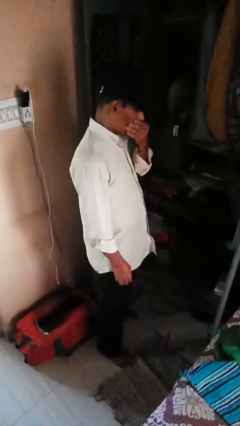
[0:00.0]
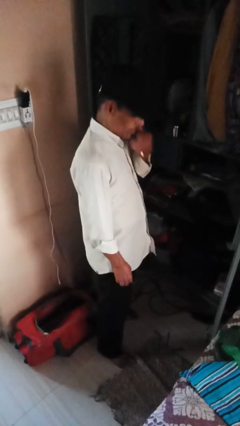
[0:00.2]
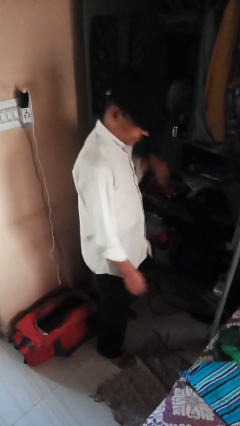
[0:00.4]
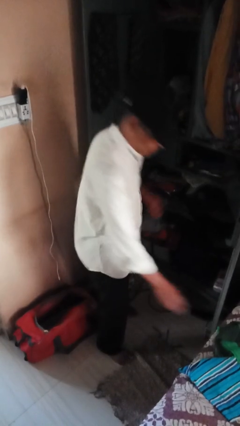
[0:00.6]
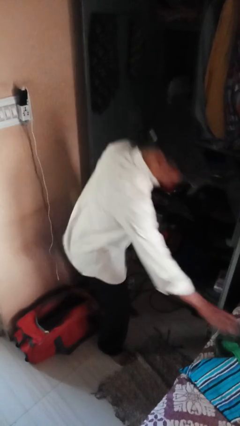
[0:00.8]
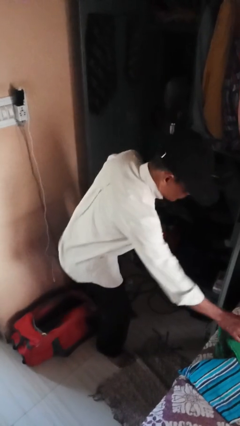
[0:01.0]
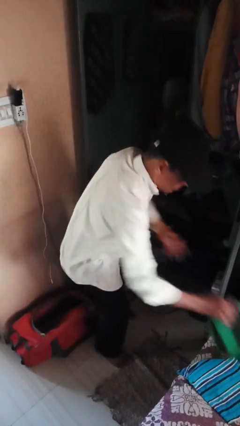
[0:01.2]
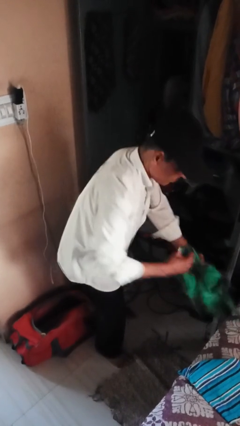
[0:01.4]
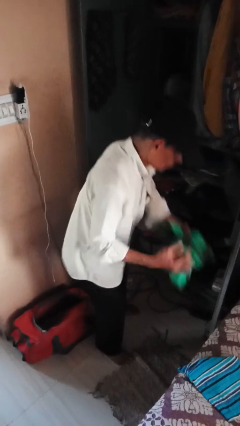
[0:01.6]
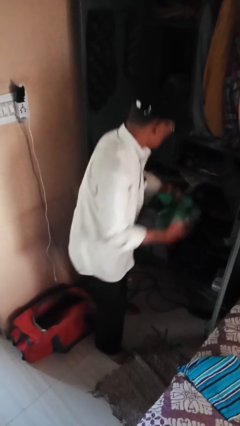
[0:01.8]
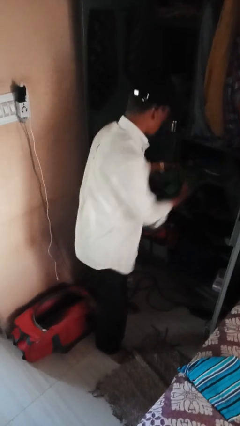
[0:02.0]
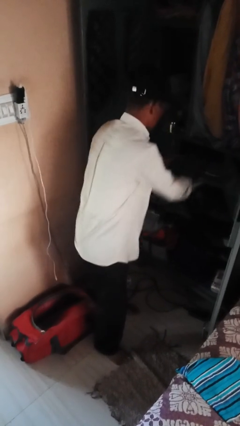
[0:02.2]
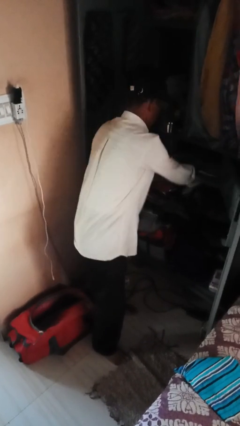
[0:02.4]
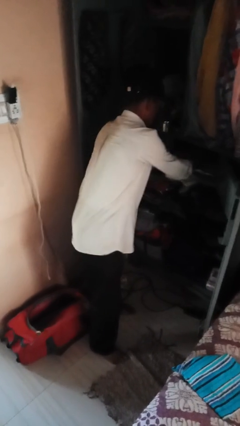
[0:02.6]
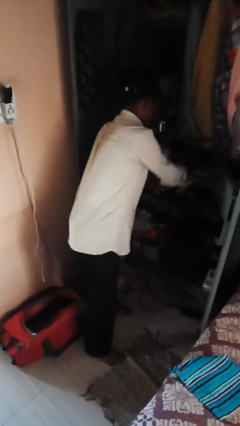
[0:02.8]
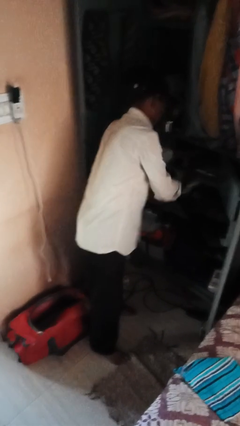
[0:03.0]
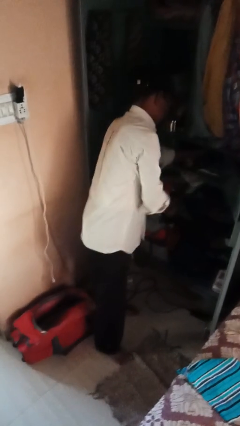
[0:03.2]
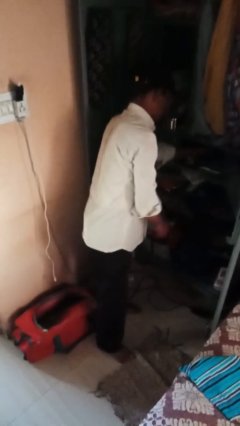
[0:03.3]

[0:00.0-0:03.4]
person puts clothes into dresser

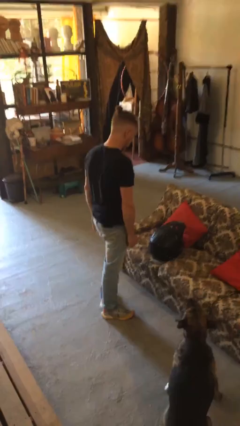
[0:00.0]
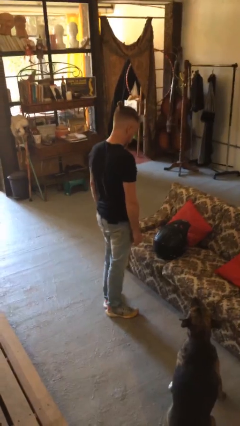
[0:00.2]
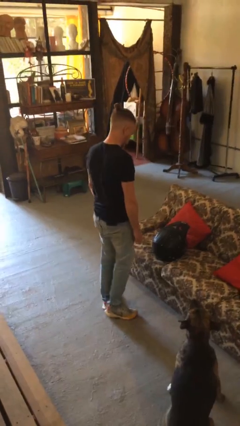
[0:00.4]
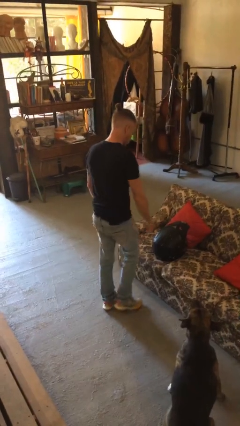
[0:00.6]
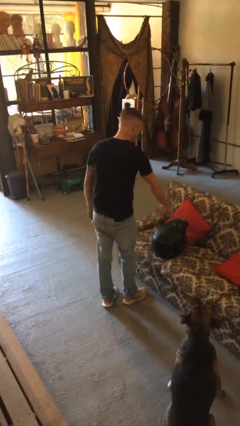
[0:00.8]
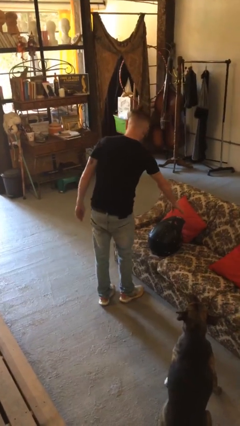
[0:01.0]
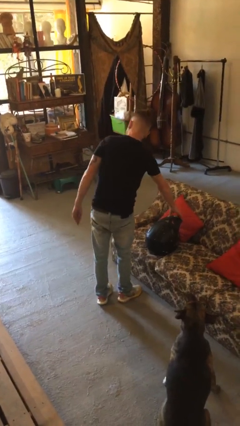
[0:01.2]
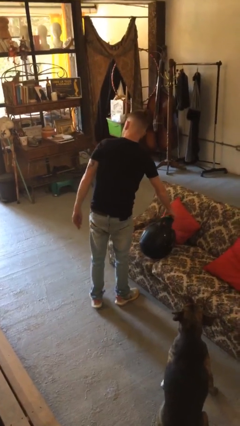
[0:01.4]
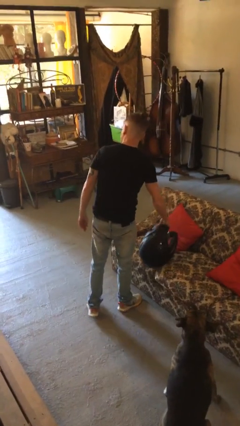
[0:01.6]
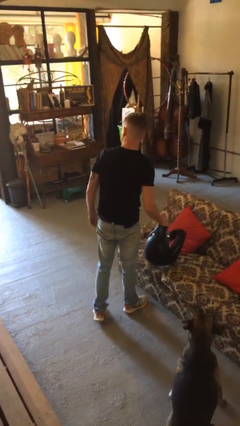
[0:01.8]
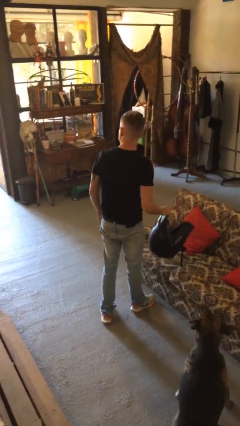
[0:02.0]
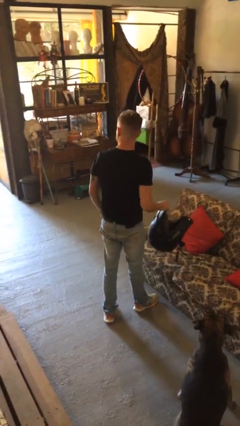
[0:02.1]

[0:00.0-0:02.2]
person picks up object from couch

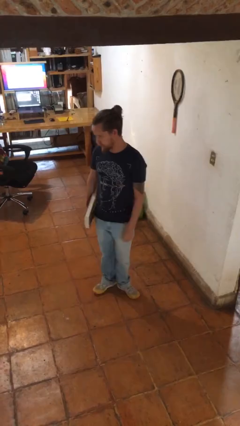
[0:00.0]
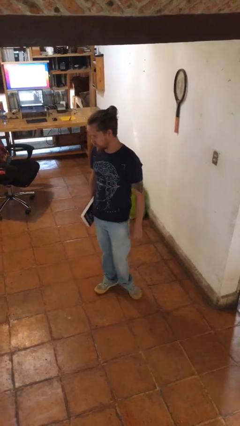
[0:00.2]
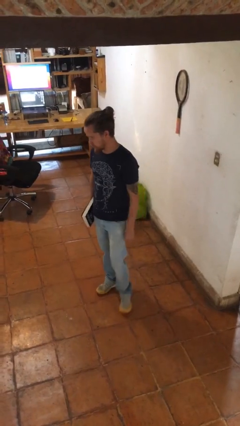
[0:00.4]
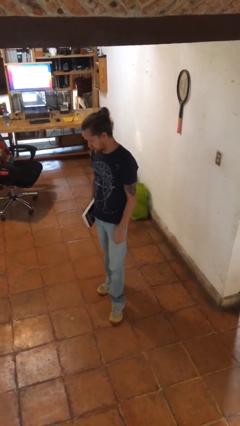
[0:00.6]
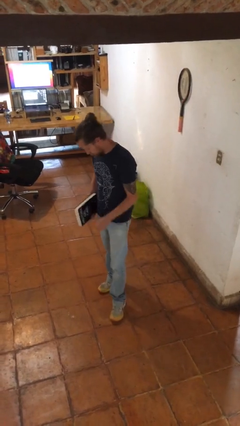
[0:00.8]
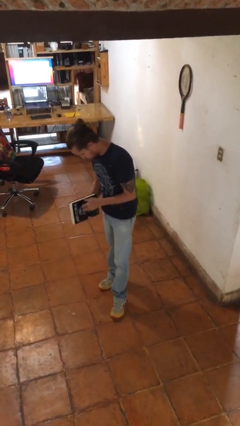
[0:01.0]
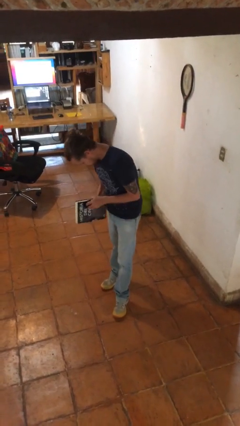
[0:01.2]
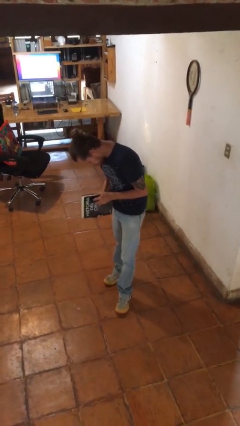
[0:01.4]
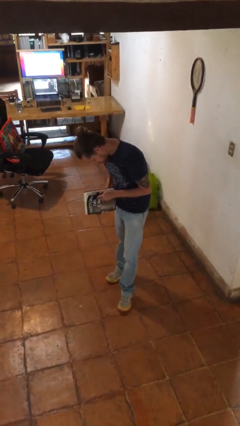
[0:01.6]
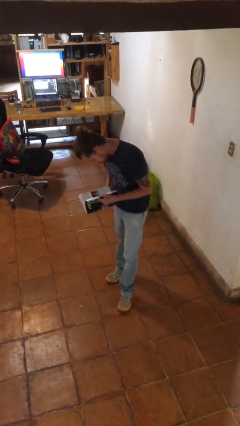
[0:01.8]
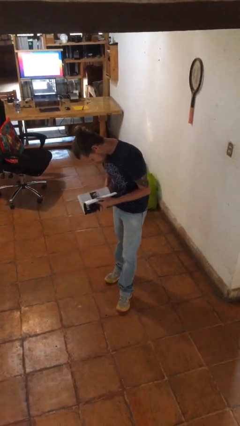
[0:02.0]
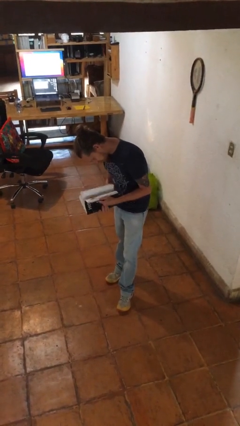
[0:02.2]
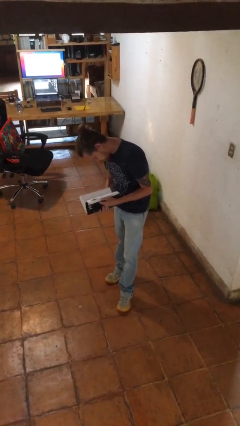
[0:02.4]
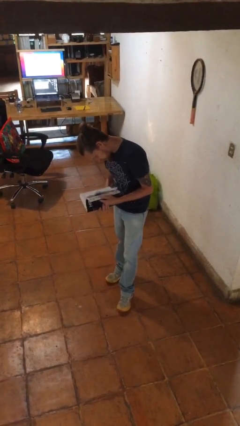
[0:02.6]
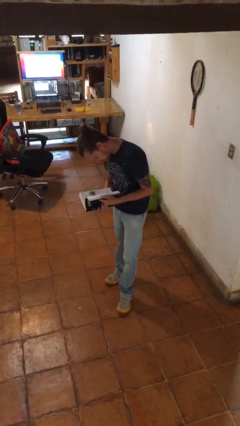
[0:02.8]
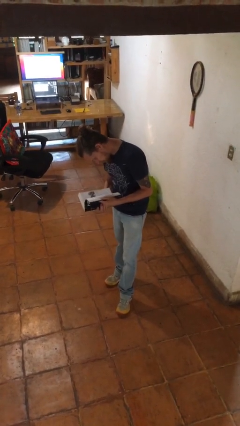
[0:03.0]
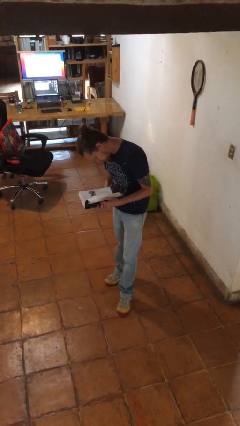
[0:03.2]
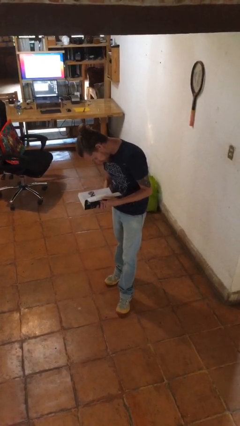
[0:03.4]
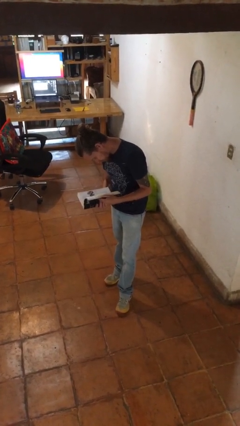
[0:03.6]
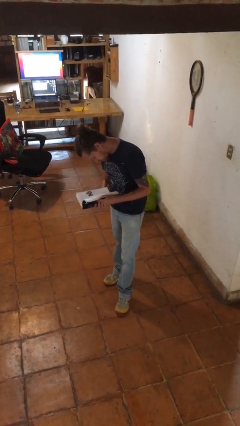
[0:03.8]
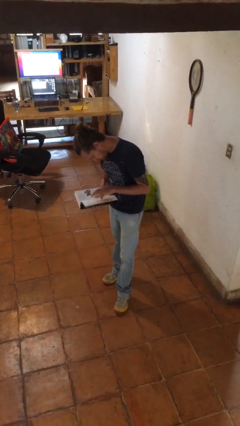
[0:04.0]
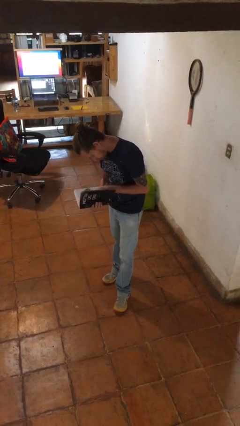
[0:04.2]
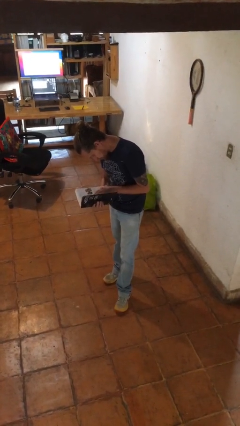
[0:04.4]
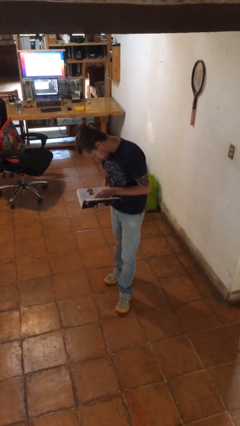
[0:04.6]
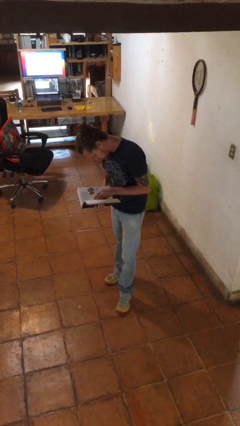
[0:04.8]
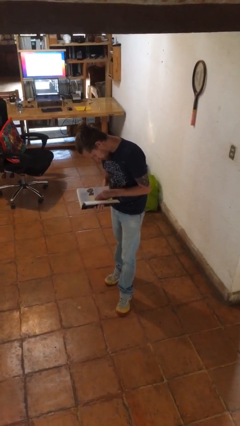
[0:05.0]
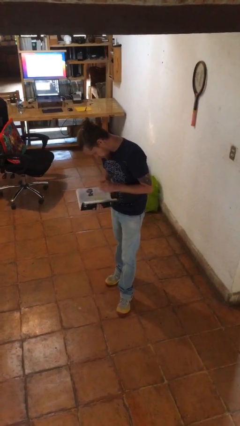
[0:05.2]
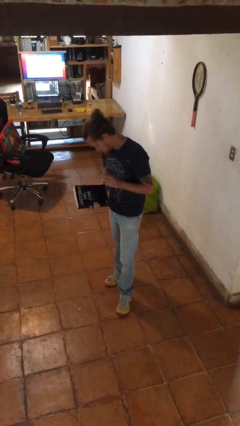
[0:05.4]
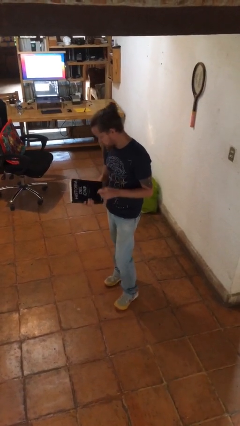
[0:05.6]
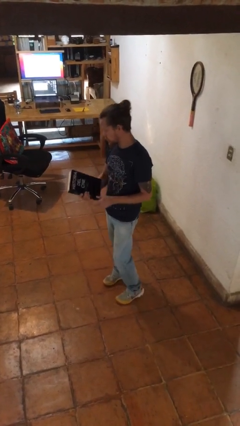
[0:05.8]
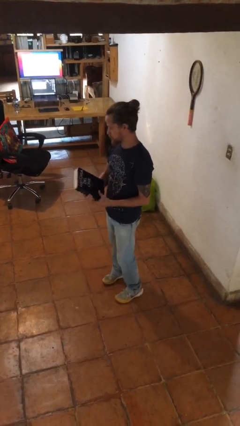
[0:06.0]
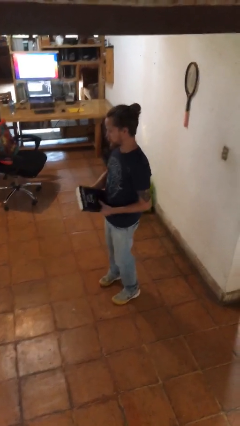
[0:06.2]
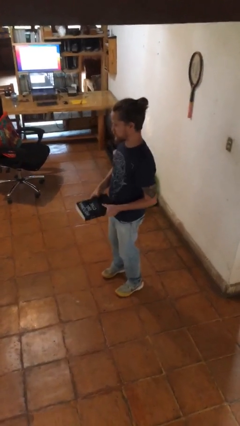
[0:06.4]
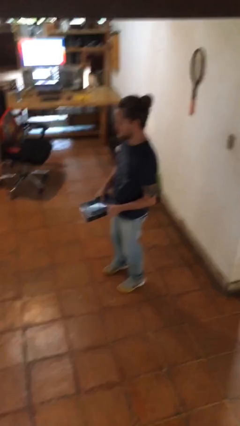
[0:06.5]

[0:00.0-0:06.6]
person reads book

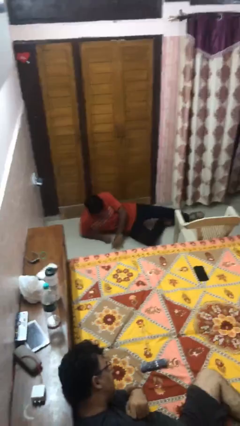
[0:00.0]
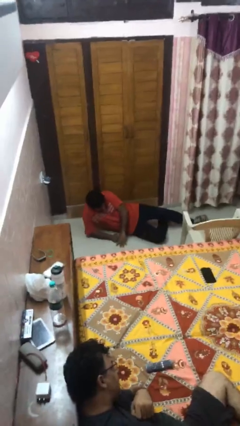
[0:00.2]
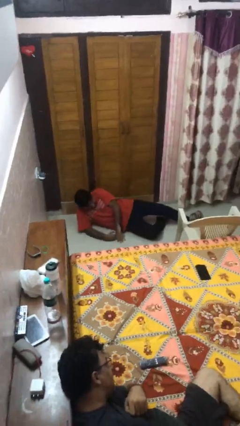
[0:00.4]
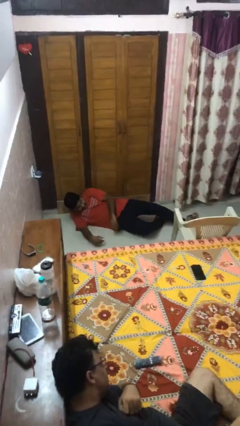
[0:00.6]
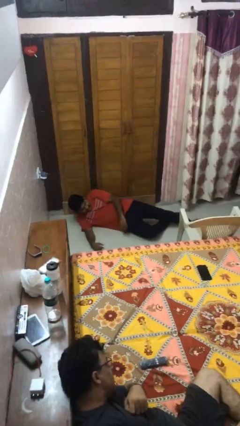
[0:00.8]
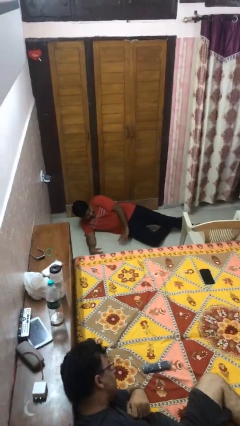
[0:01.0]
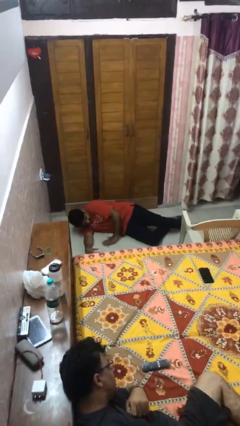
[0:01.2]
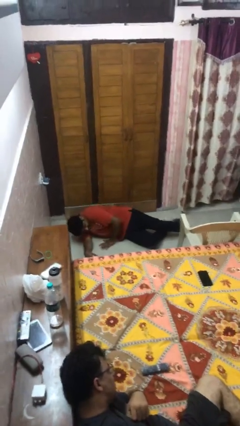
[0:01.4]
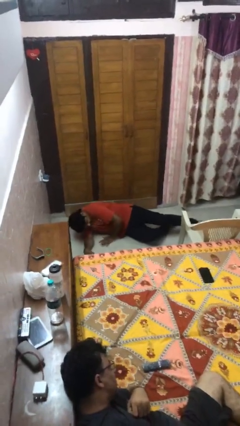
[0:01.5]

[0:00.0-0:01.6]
person lies down on floor

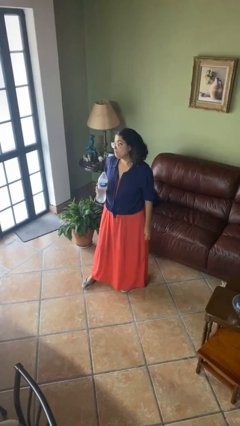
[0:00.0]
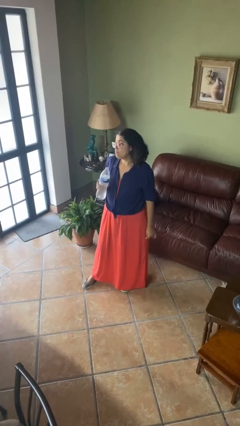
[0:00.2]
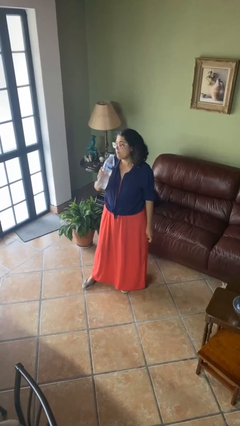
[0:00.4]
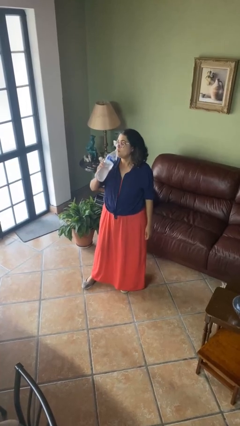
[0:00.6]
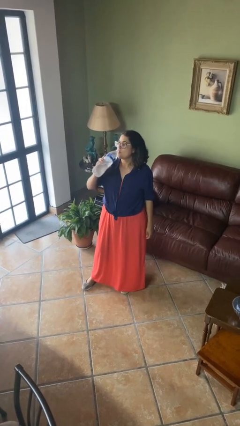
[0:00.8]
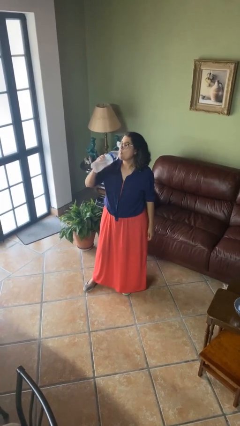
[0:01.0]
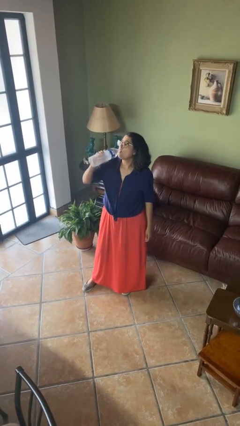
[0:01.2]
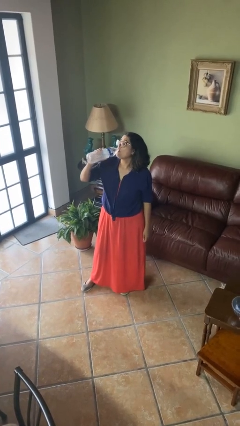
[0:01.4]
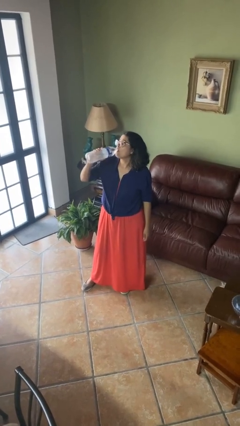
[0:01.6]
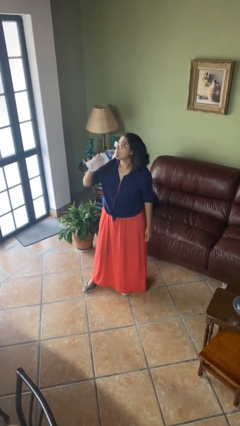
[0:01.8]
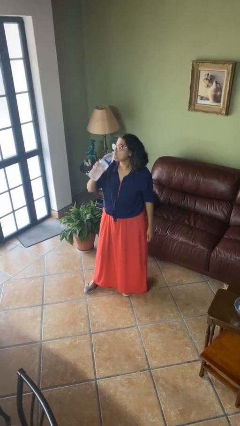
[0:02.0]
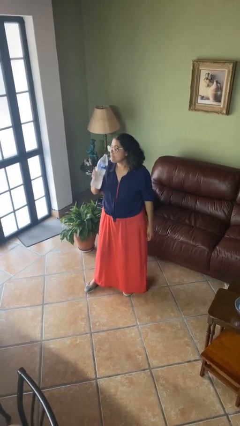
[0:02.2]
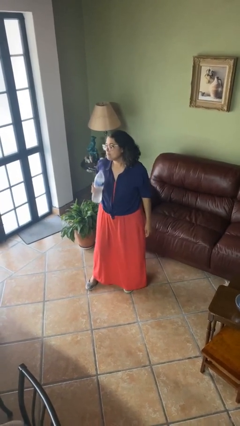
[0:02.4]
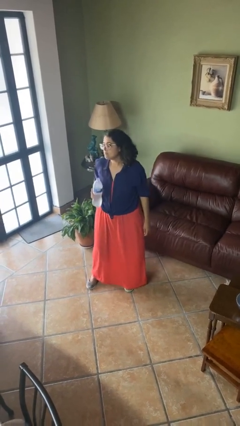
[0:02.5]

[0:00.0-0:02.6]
person drinks from bottle

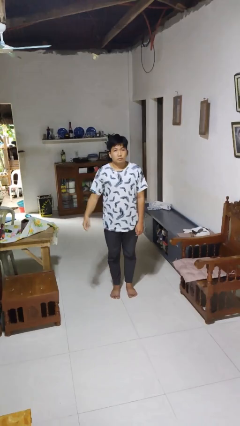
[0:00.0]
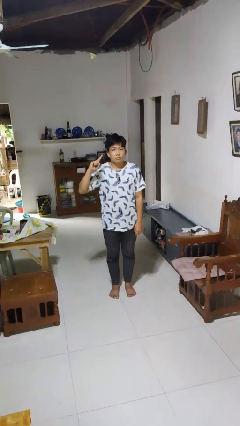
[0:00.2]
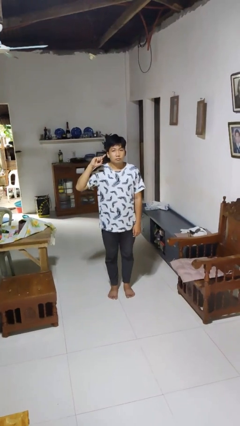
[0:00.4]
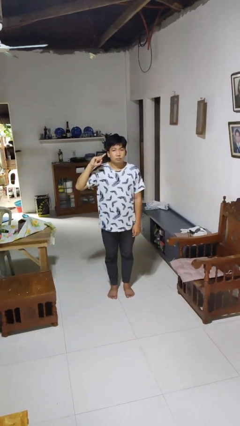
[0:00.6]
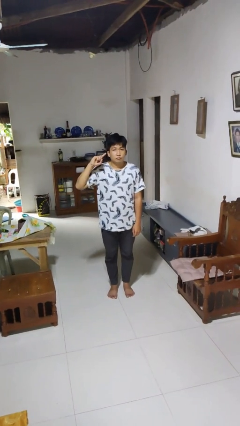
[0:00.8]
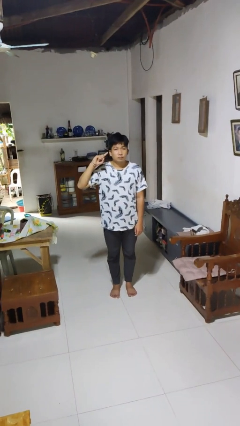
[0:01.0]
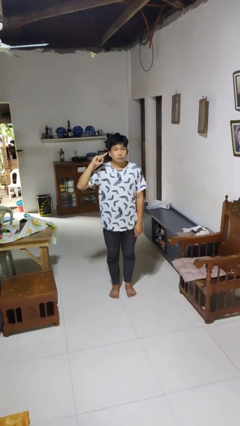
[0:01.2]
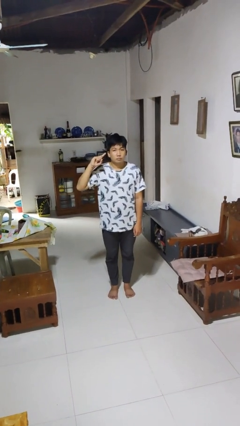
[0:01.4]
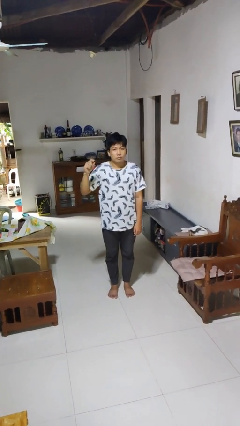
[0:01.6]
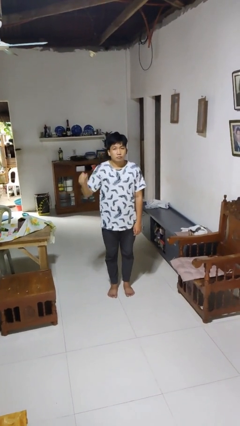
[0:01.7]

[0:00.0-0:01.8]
person gestures listen closely
